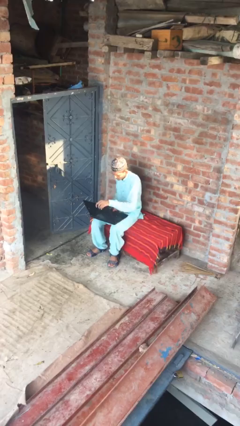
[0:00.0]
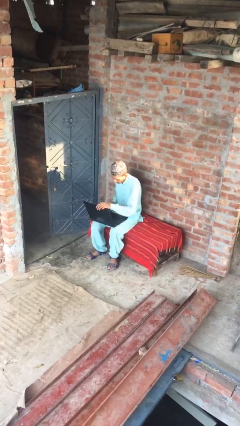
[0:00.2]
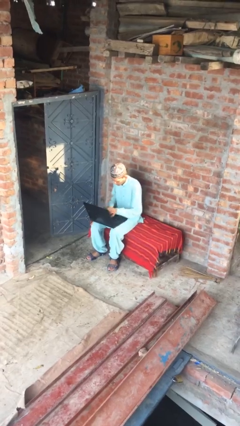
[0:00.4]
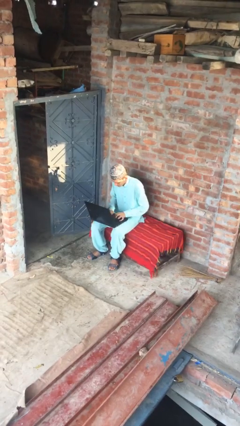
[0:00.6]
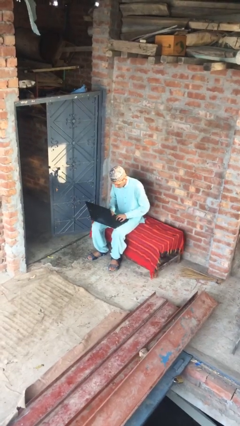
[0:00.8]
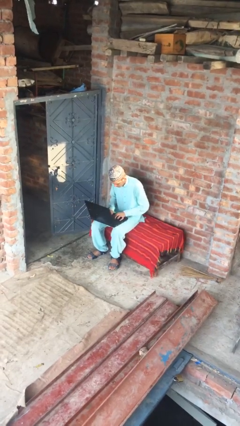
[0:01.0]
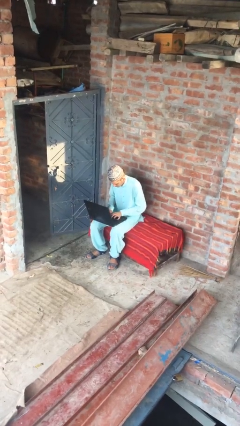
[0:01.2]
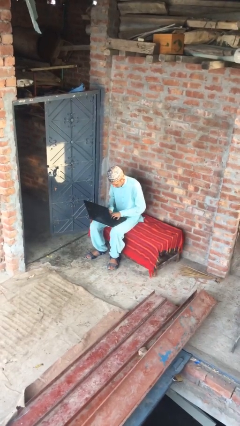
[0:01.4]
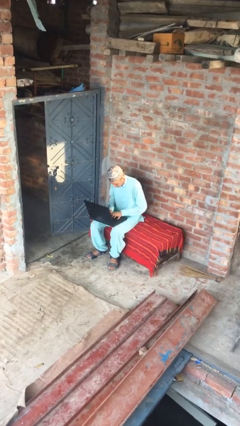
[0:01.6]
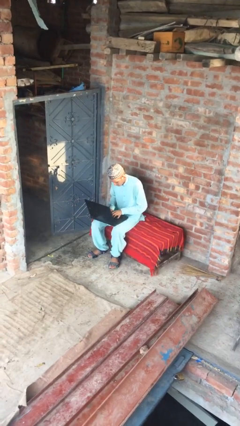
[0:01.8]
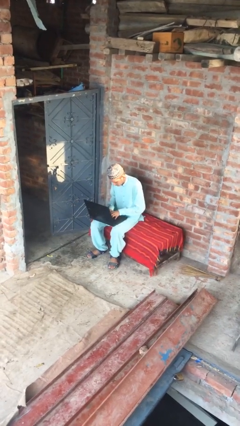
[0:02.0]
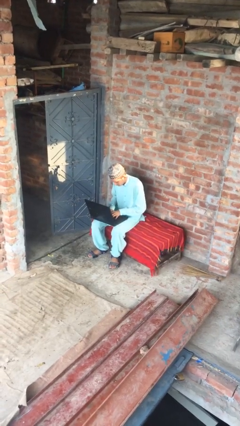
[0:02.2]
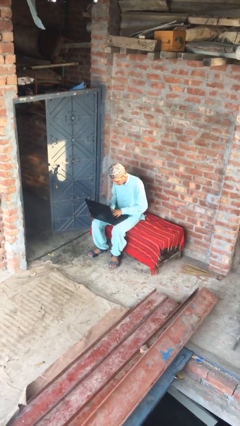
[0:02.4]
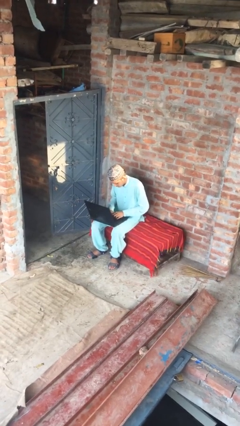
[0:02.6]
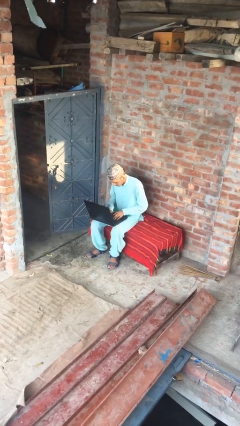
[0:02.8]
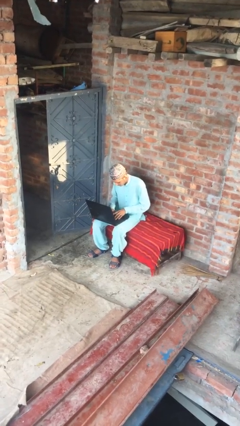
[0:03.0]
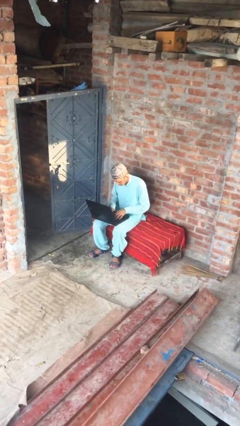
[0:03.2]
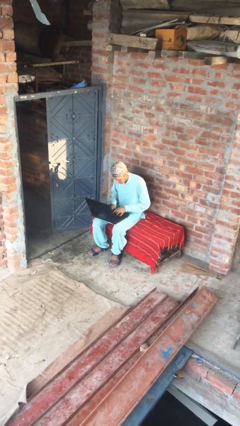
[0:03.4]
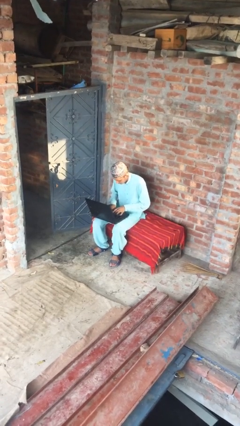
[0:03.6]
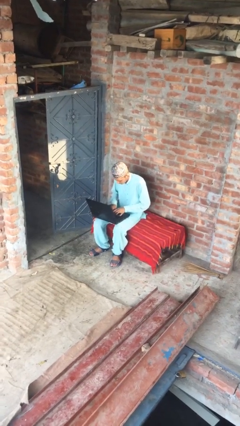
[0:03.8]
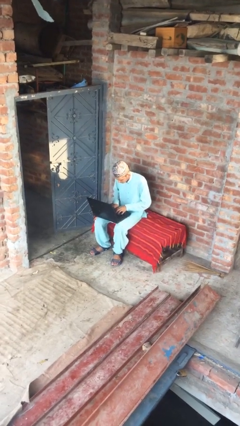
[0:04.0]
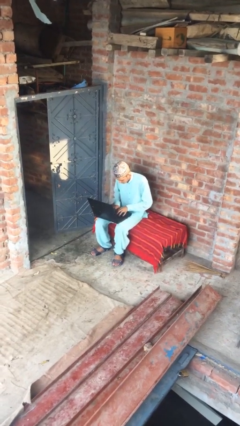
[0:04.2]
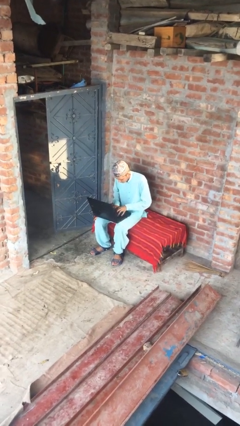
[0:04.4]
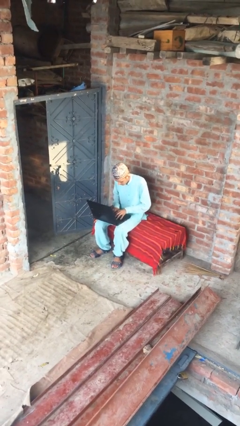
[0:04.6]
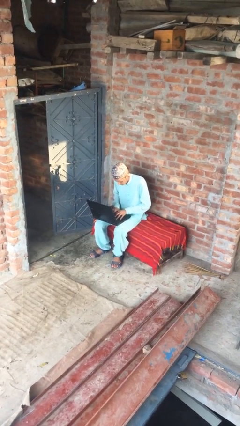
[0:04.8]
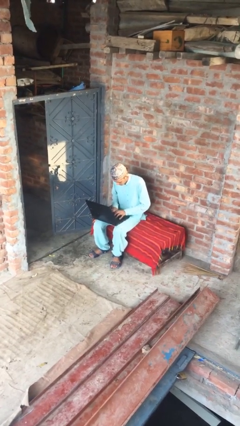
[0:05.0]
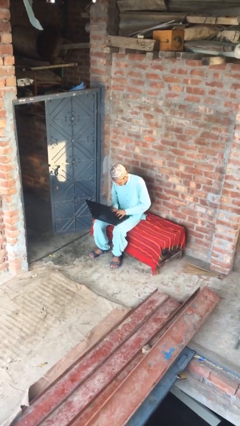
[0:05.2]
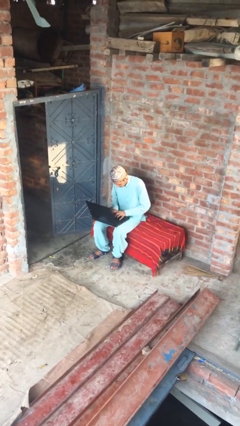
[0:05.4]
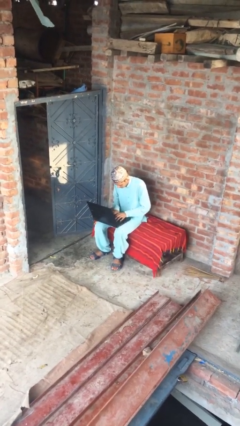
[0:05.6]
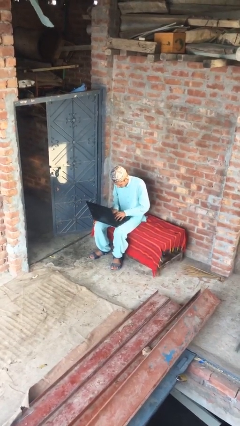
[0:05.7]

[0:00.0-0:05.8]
person interacts with laptop

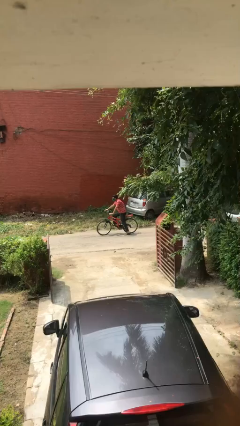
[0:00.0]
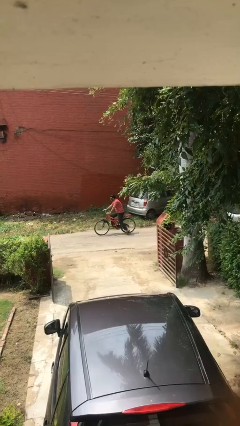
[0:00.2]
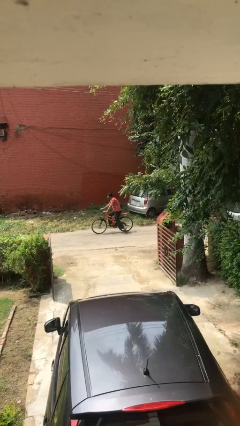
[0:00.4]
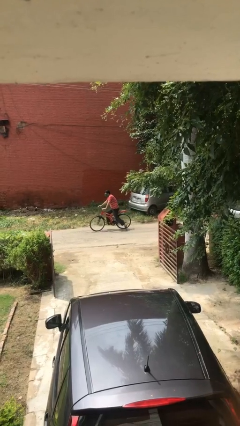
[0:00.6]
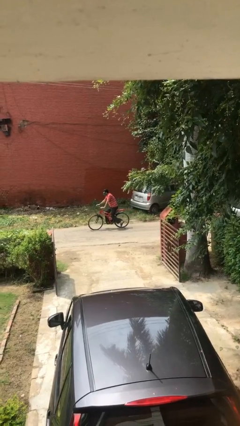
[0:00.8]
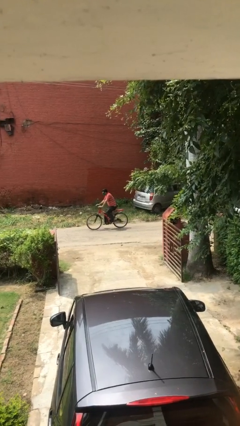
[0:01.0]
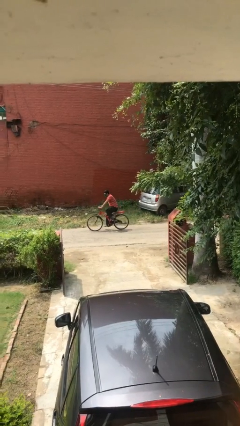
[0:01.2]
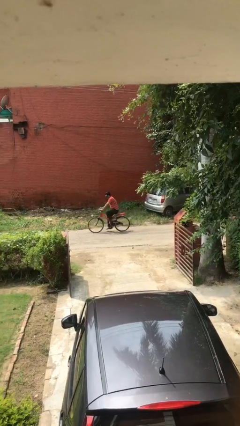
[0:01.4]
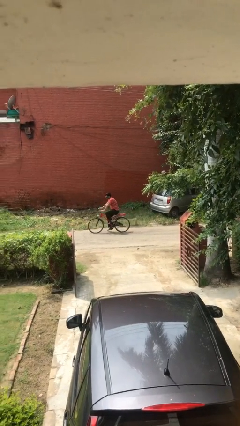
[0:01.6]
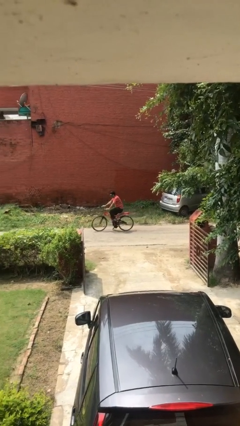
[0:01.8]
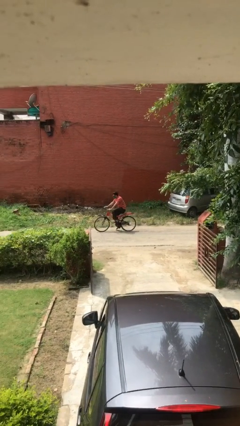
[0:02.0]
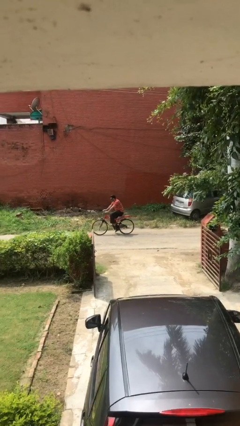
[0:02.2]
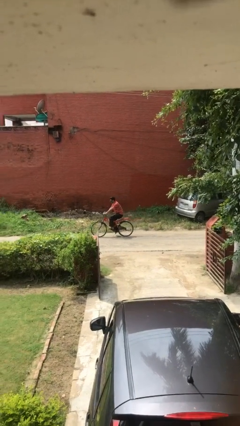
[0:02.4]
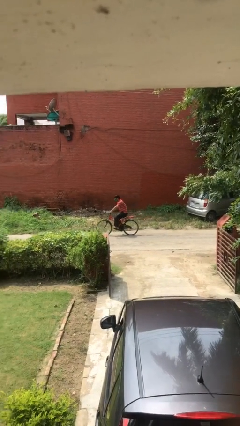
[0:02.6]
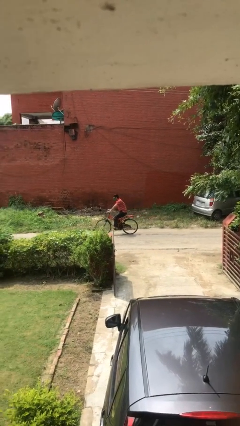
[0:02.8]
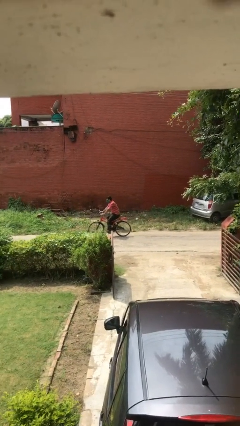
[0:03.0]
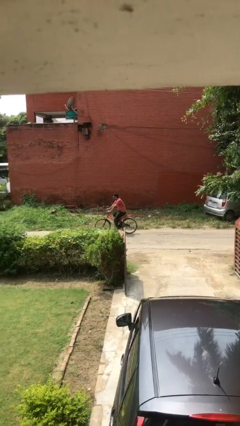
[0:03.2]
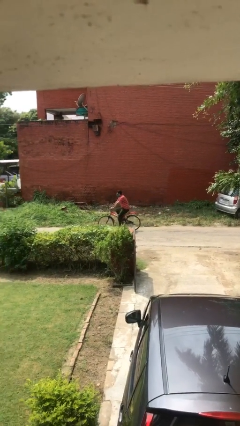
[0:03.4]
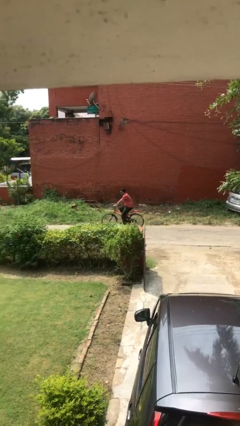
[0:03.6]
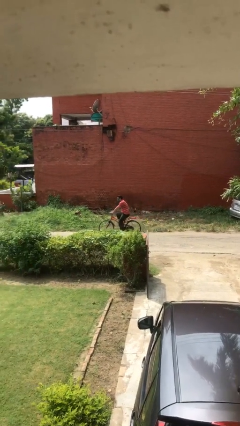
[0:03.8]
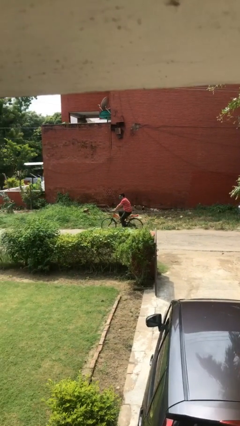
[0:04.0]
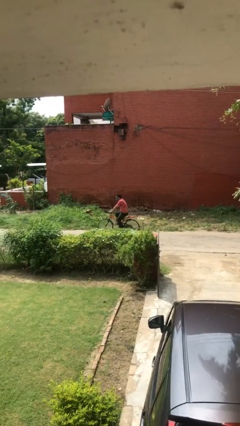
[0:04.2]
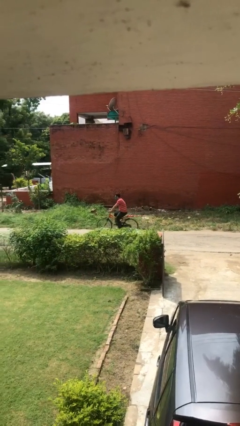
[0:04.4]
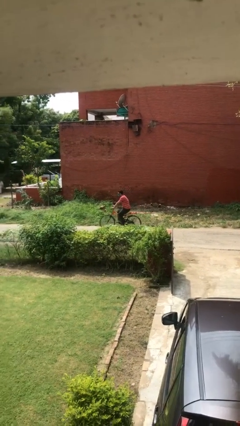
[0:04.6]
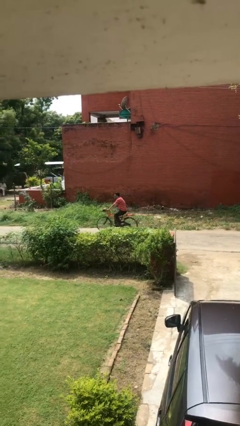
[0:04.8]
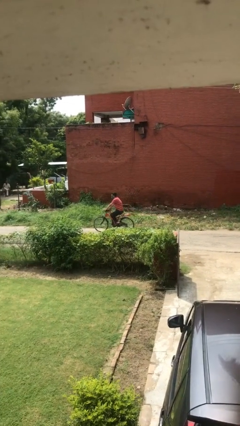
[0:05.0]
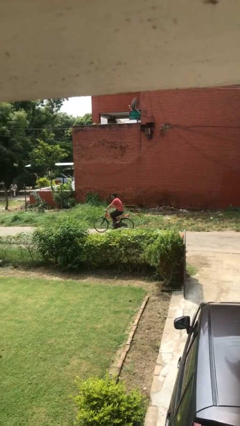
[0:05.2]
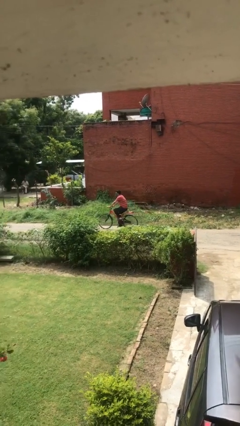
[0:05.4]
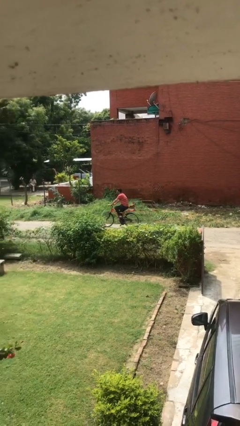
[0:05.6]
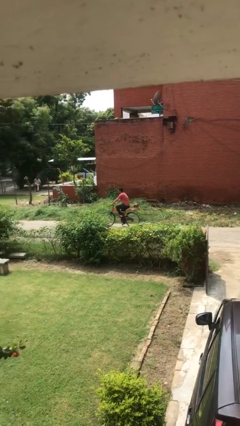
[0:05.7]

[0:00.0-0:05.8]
person rides bicycle

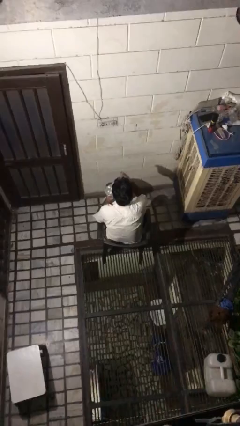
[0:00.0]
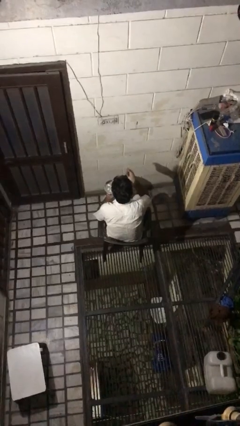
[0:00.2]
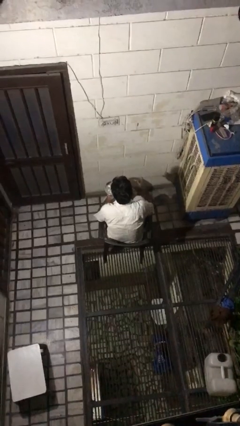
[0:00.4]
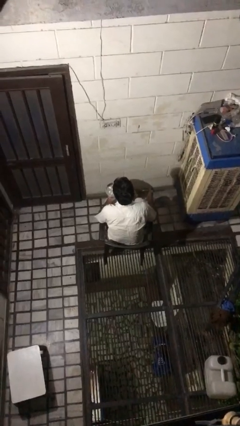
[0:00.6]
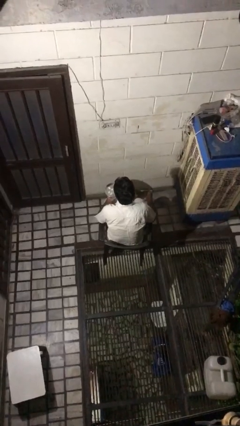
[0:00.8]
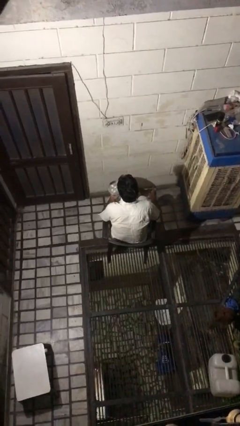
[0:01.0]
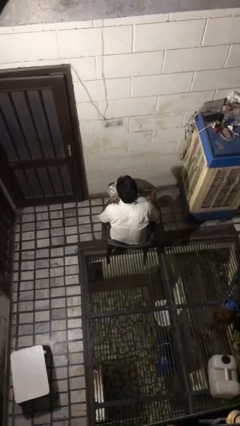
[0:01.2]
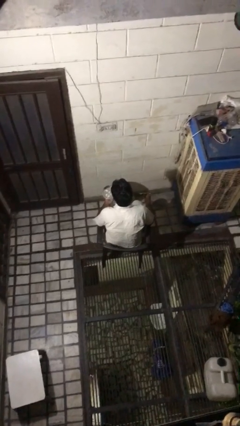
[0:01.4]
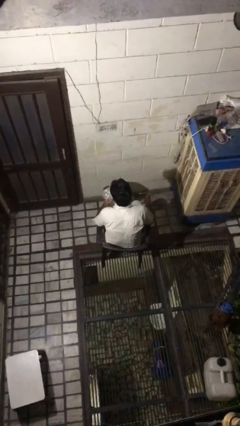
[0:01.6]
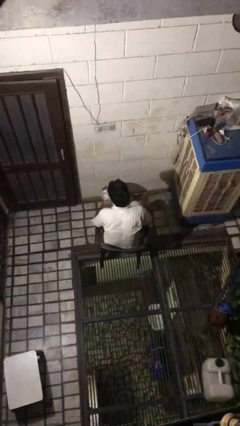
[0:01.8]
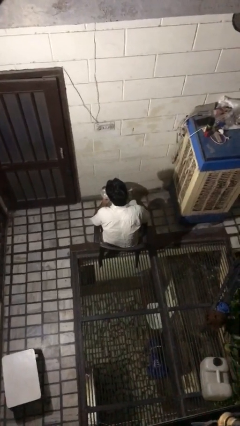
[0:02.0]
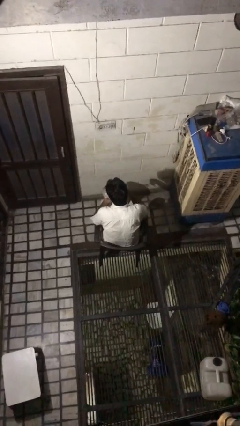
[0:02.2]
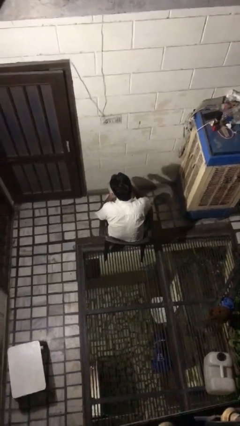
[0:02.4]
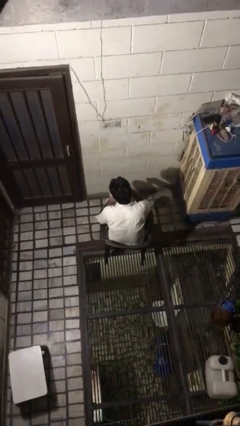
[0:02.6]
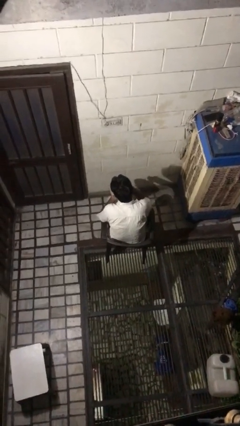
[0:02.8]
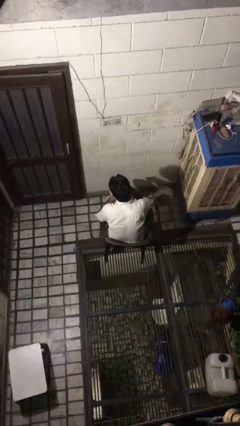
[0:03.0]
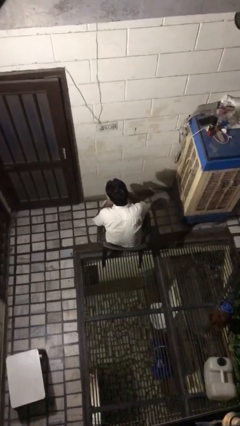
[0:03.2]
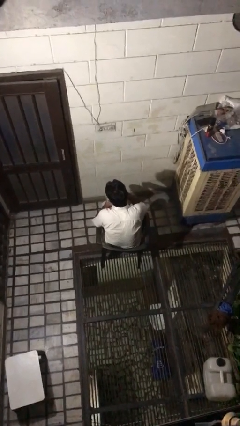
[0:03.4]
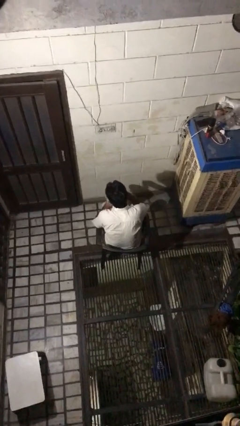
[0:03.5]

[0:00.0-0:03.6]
person eats with utensil

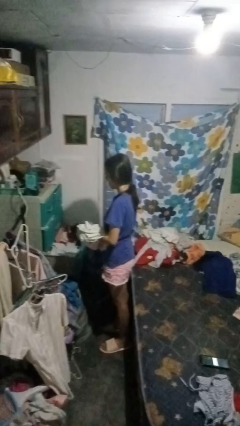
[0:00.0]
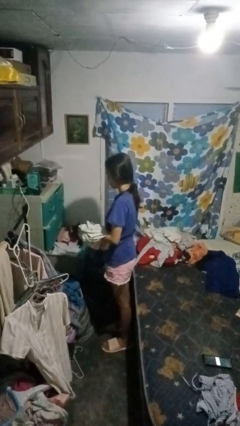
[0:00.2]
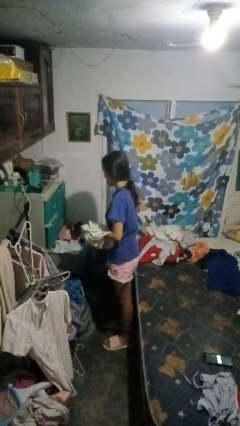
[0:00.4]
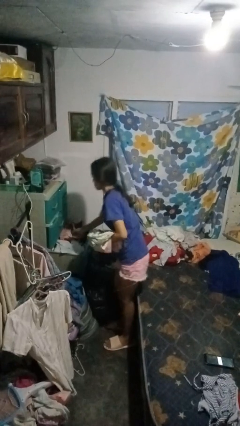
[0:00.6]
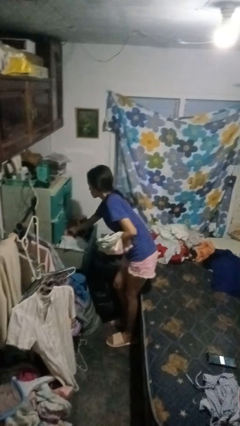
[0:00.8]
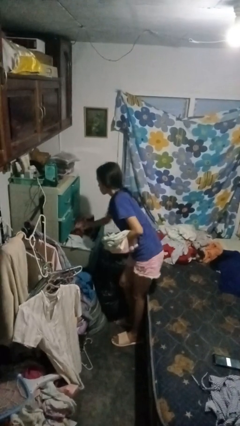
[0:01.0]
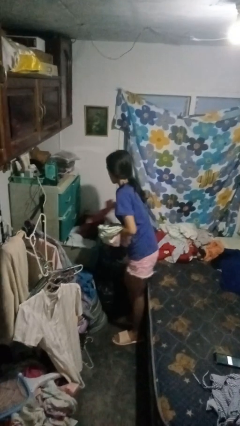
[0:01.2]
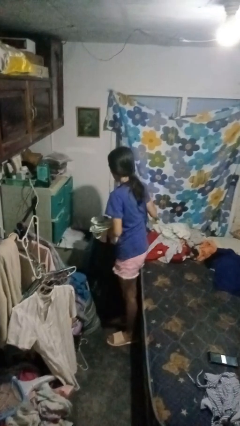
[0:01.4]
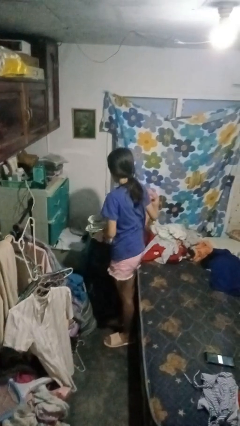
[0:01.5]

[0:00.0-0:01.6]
person takes clothes from dresser

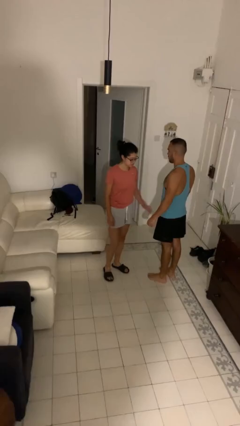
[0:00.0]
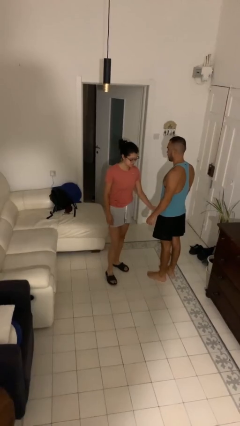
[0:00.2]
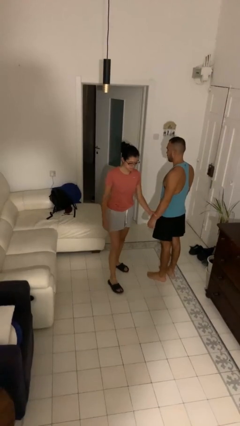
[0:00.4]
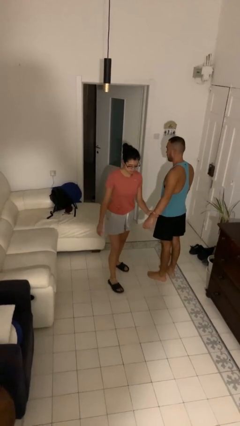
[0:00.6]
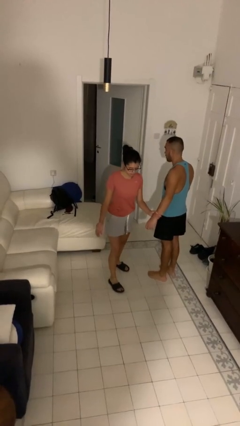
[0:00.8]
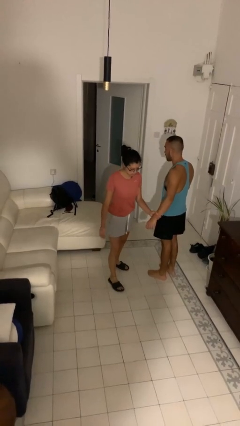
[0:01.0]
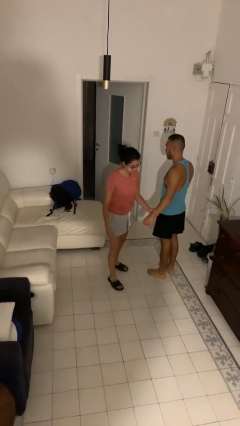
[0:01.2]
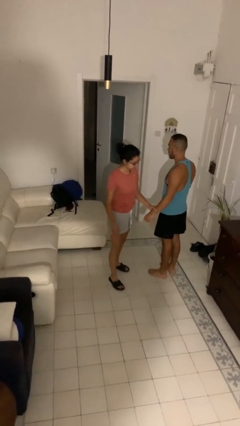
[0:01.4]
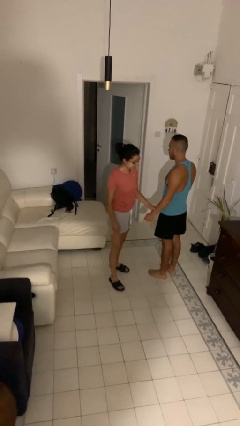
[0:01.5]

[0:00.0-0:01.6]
person grabs person by forearm
